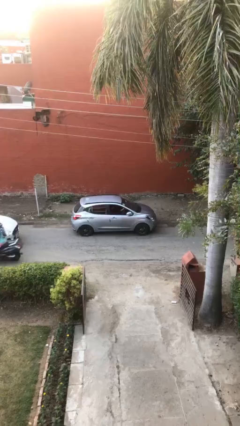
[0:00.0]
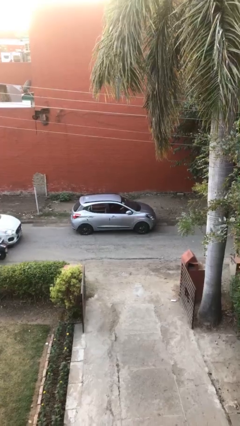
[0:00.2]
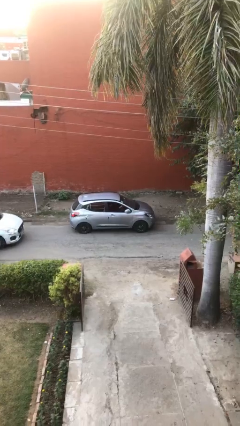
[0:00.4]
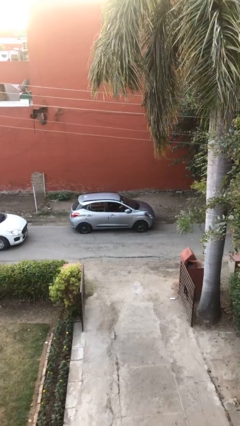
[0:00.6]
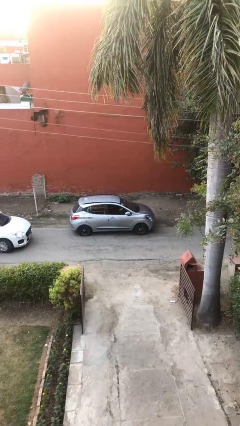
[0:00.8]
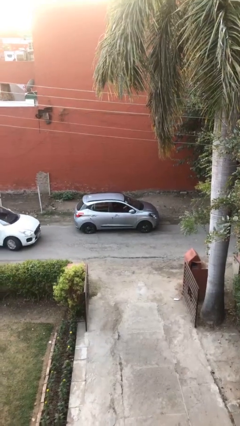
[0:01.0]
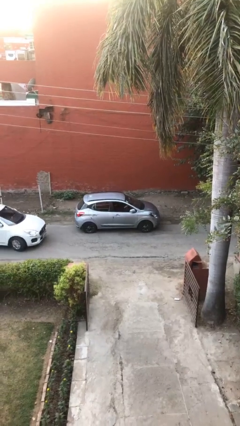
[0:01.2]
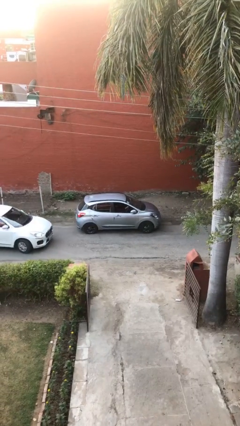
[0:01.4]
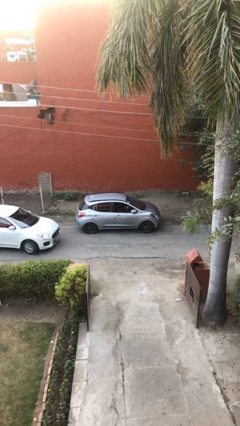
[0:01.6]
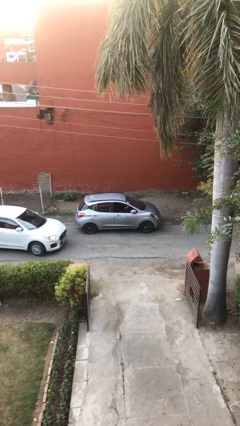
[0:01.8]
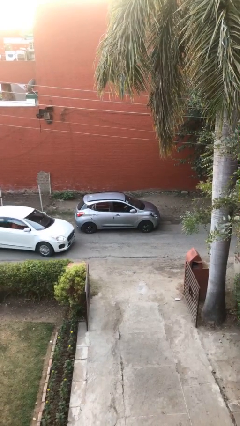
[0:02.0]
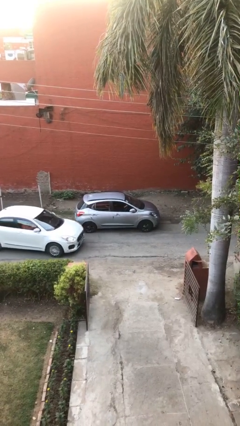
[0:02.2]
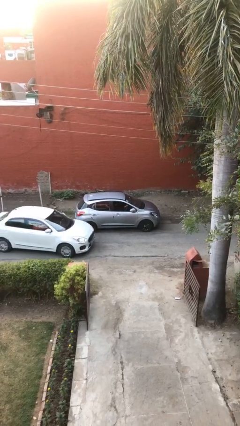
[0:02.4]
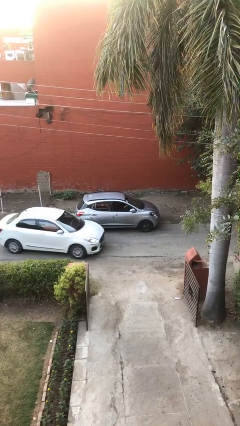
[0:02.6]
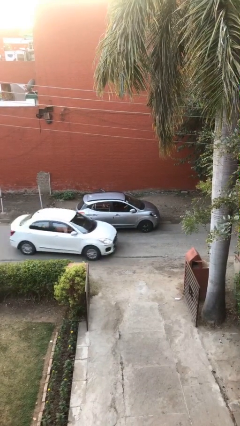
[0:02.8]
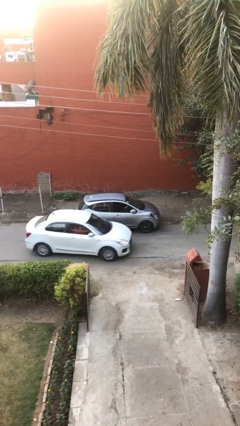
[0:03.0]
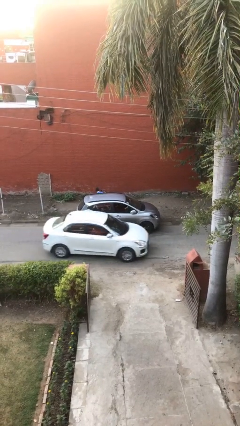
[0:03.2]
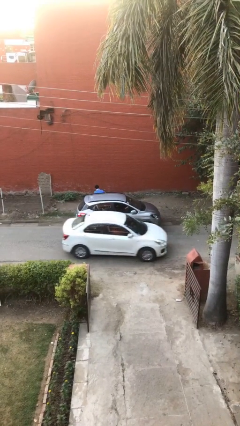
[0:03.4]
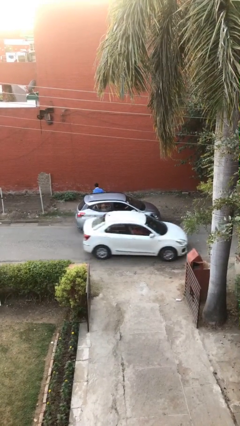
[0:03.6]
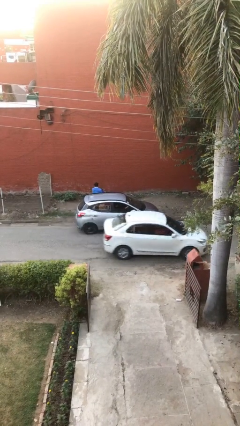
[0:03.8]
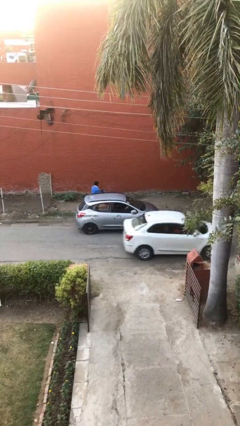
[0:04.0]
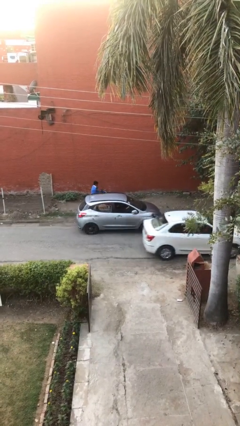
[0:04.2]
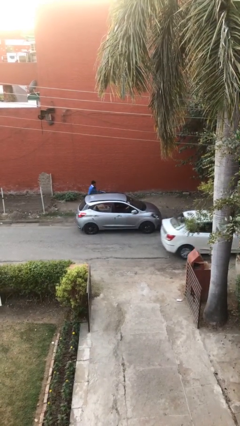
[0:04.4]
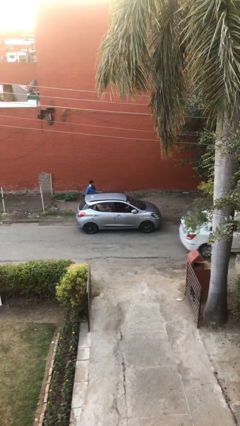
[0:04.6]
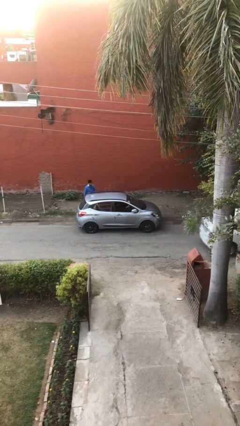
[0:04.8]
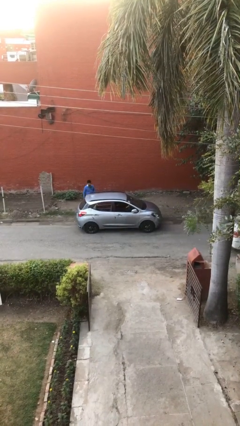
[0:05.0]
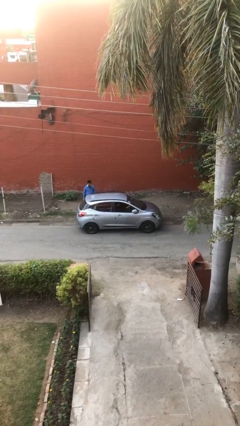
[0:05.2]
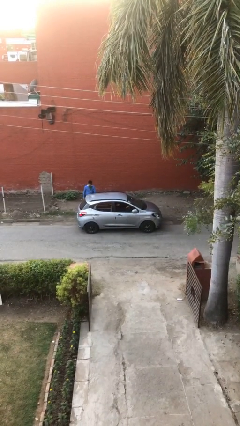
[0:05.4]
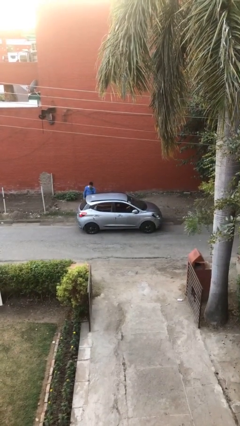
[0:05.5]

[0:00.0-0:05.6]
car drops off person

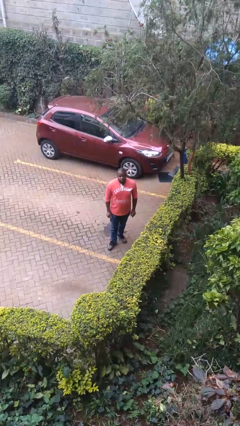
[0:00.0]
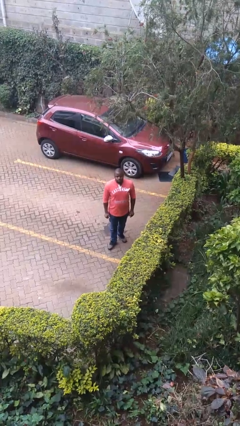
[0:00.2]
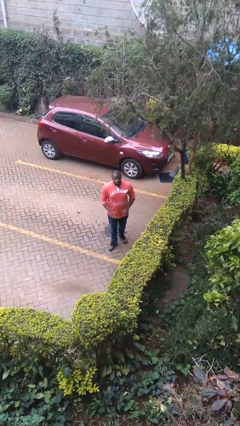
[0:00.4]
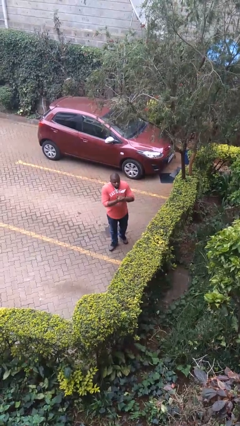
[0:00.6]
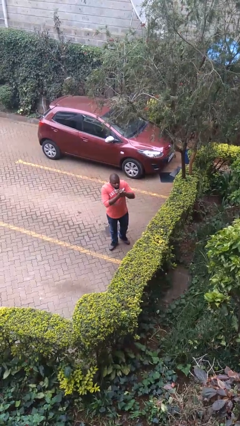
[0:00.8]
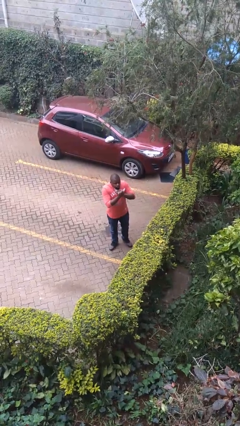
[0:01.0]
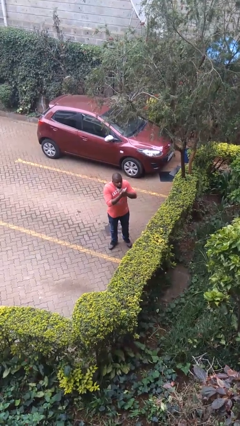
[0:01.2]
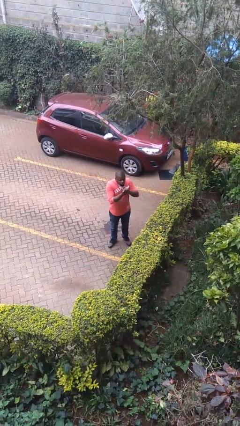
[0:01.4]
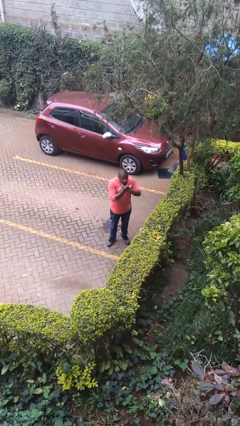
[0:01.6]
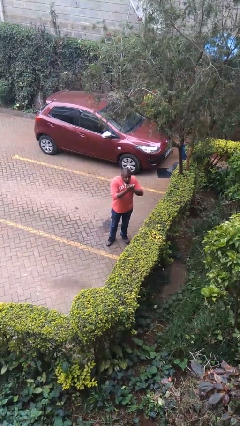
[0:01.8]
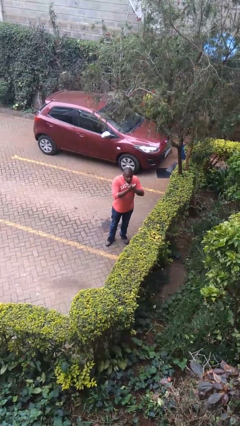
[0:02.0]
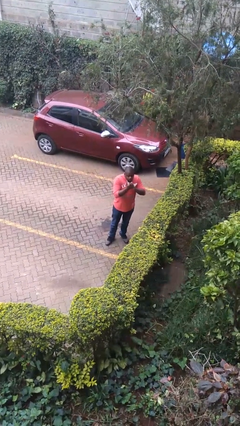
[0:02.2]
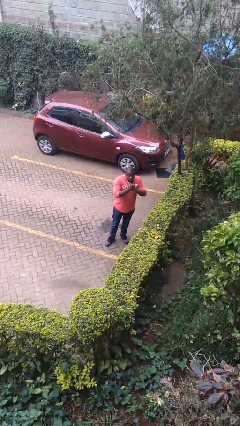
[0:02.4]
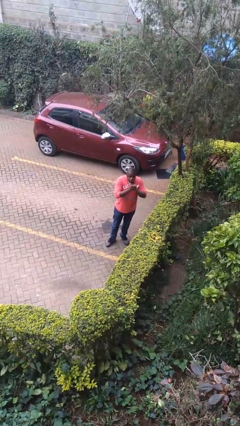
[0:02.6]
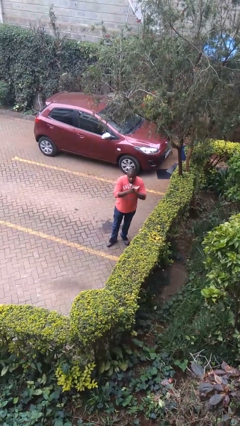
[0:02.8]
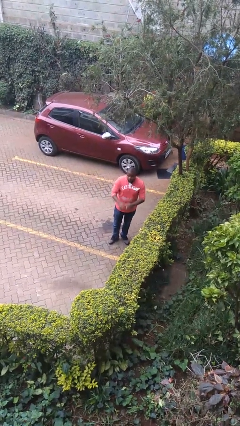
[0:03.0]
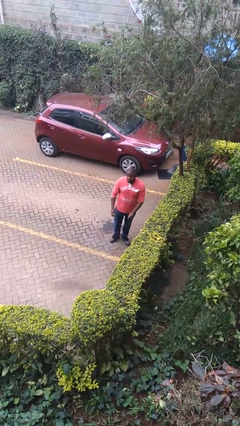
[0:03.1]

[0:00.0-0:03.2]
person blows into hands

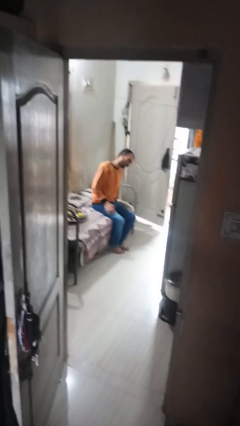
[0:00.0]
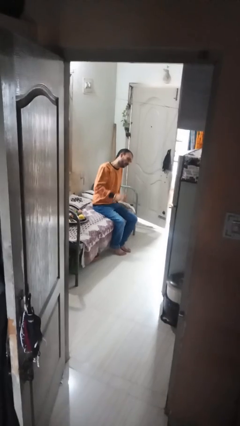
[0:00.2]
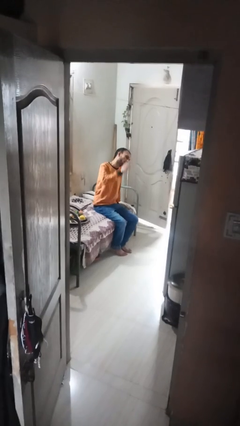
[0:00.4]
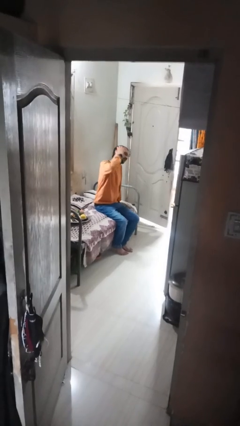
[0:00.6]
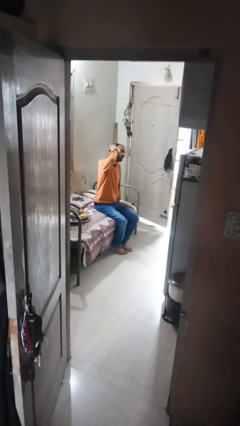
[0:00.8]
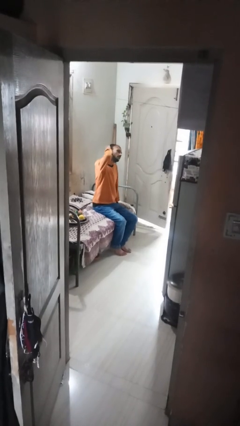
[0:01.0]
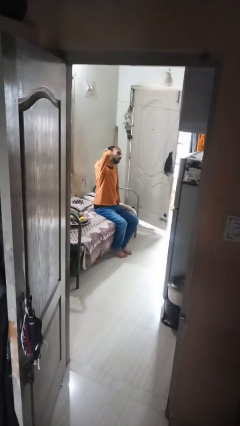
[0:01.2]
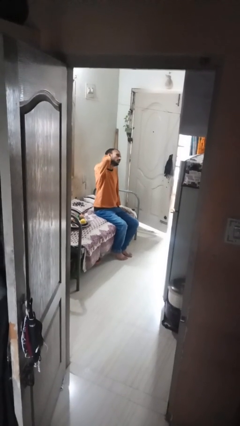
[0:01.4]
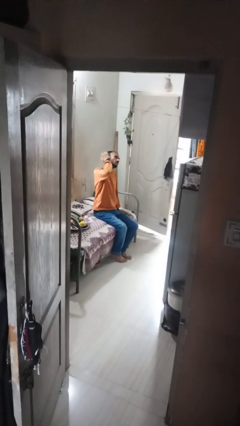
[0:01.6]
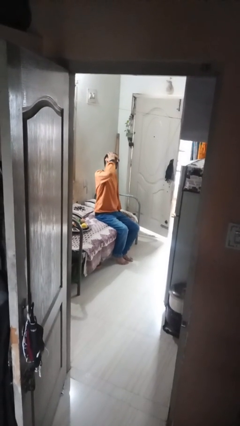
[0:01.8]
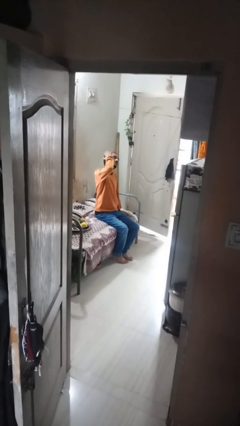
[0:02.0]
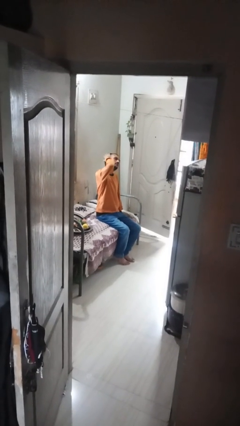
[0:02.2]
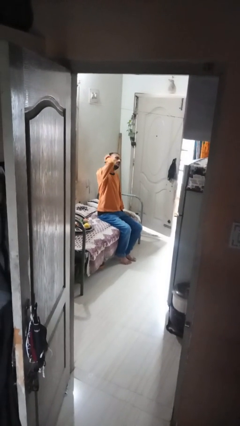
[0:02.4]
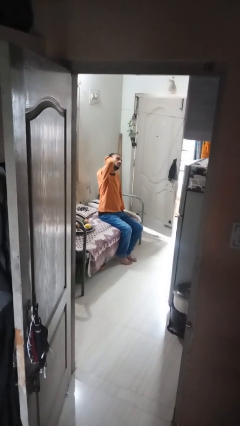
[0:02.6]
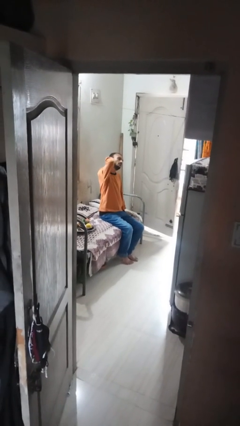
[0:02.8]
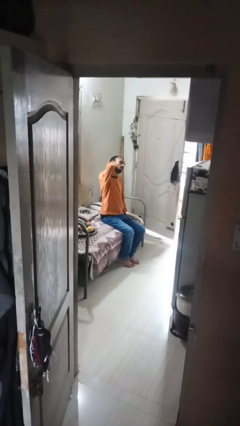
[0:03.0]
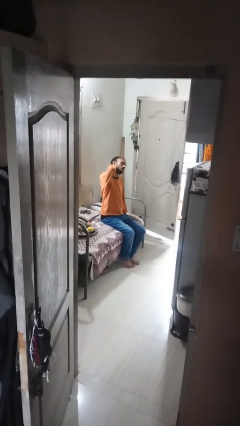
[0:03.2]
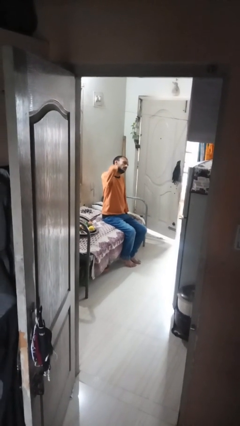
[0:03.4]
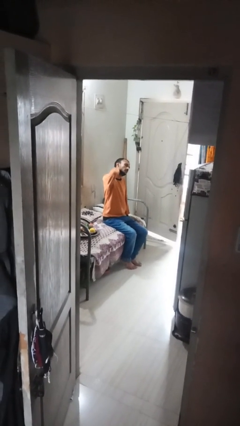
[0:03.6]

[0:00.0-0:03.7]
person strokes hair

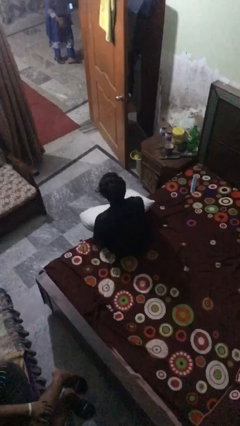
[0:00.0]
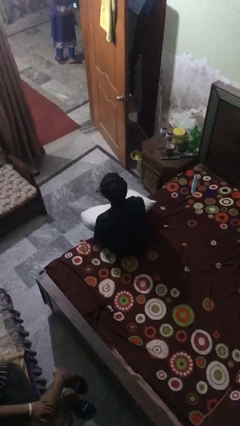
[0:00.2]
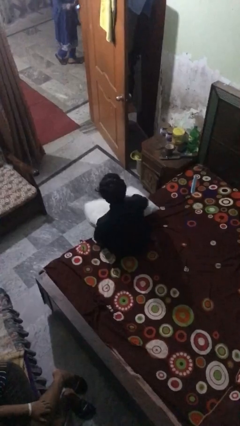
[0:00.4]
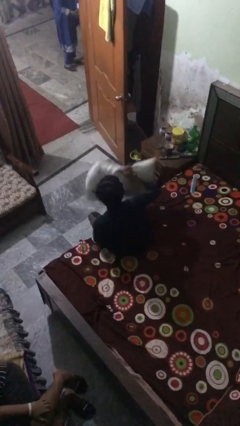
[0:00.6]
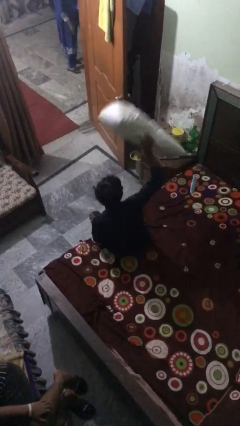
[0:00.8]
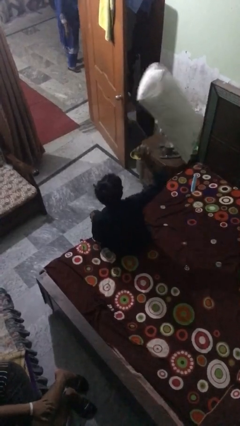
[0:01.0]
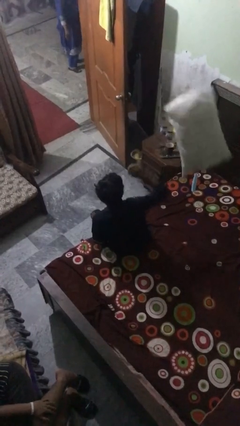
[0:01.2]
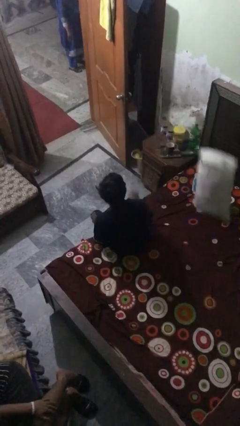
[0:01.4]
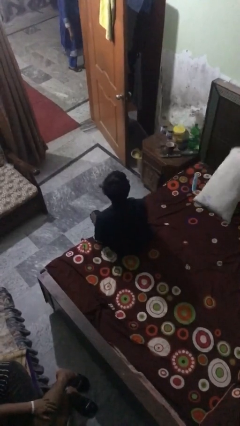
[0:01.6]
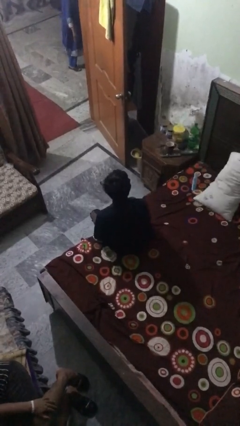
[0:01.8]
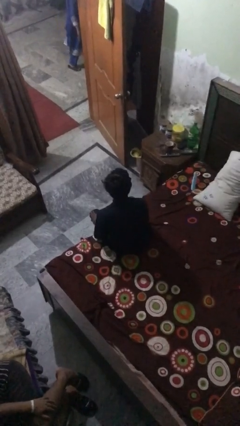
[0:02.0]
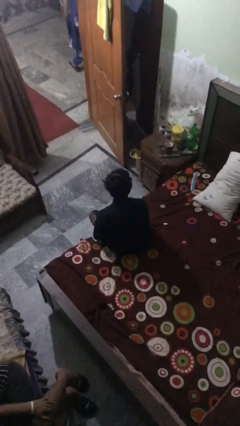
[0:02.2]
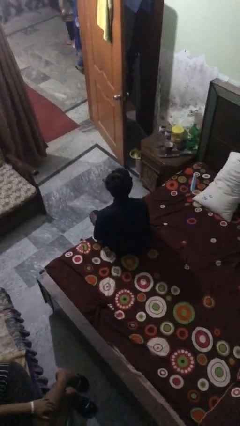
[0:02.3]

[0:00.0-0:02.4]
person throws object on bed

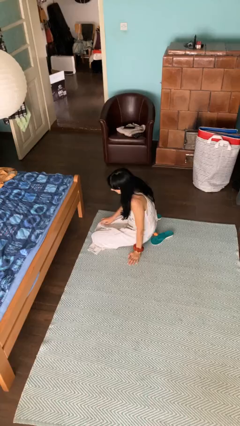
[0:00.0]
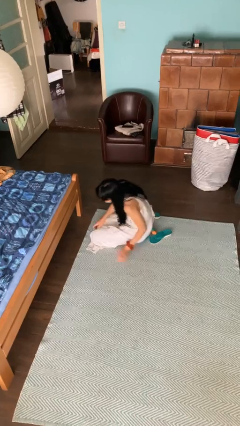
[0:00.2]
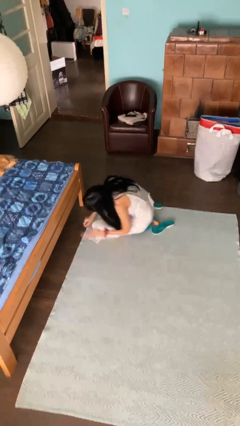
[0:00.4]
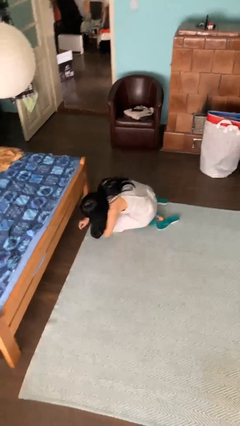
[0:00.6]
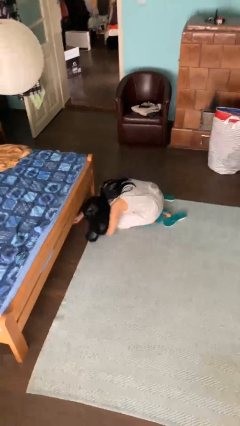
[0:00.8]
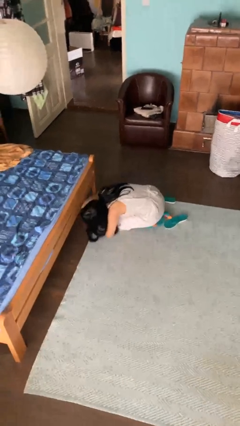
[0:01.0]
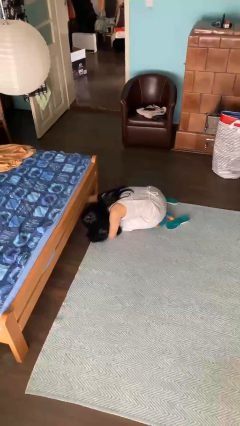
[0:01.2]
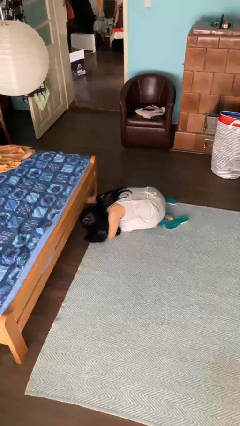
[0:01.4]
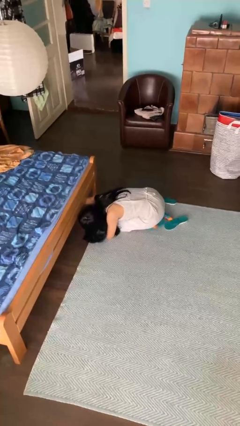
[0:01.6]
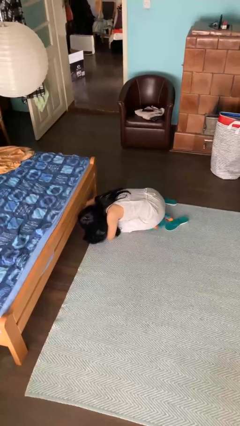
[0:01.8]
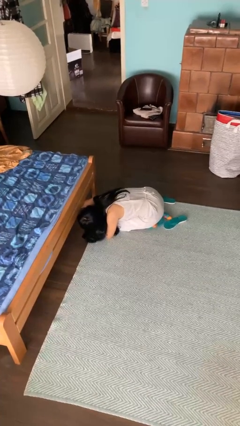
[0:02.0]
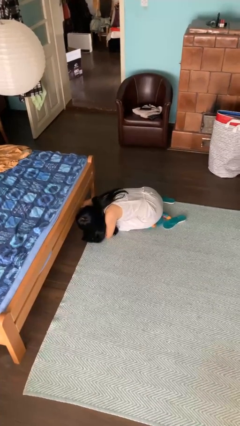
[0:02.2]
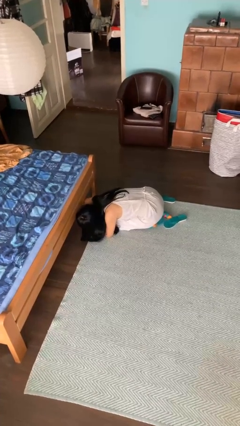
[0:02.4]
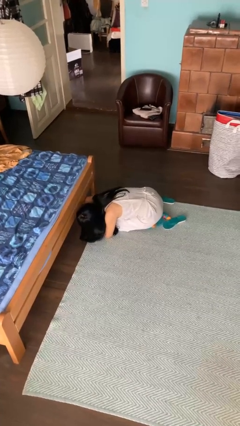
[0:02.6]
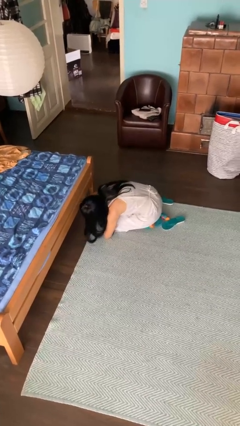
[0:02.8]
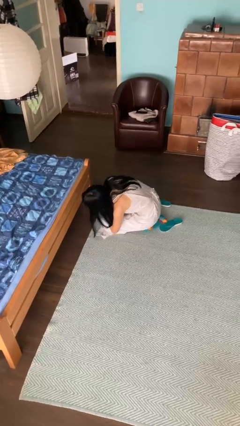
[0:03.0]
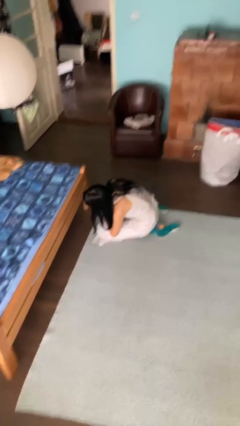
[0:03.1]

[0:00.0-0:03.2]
person searches under bed
